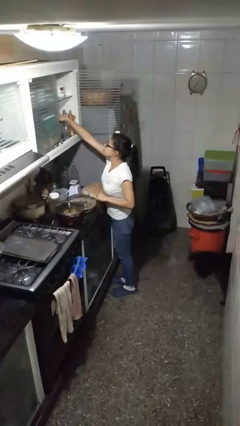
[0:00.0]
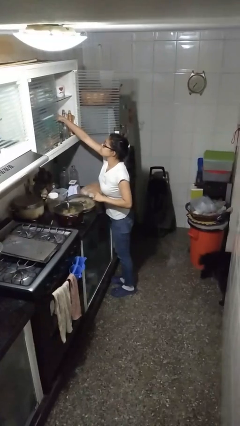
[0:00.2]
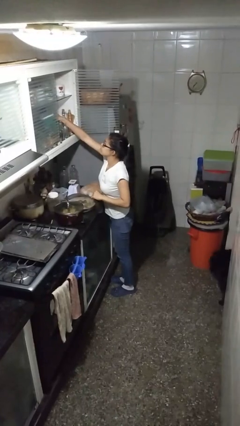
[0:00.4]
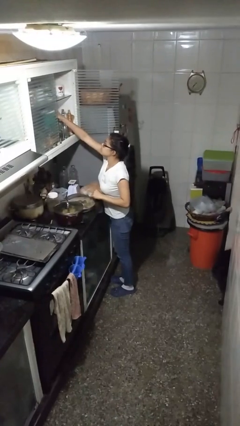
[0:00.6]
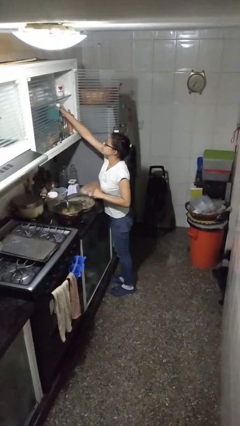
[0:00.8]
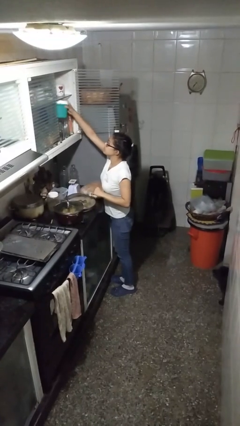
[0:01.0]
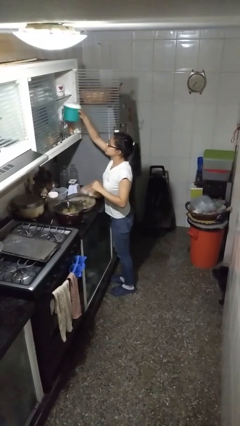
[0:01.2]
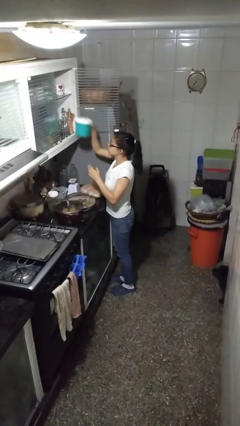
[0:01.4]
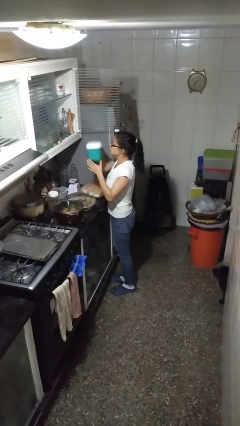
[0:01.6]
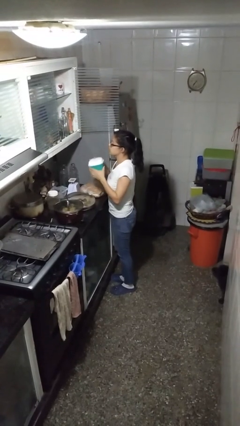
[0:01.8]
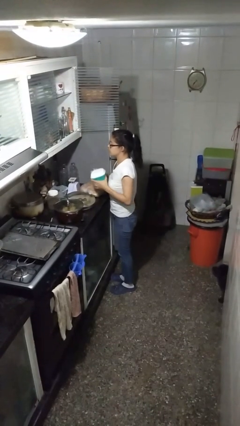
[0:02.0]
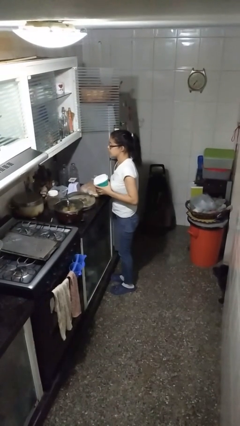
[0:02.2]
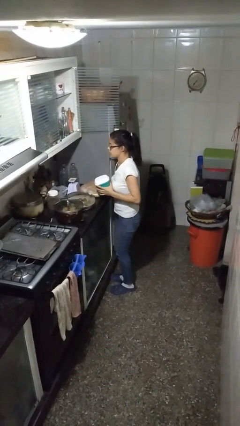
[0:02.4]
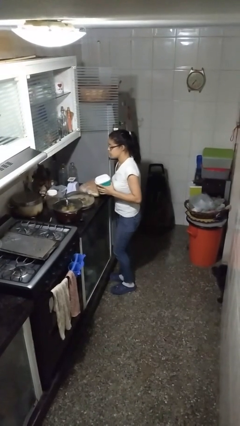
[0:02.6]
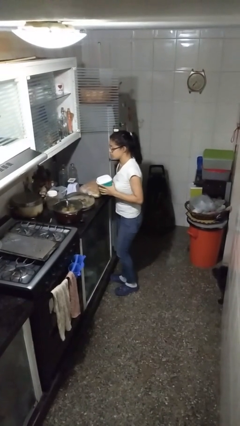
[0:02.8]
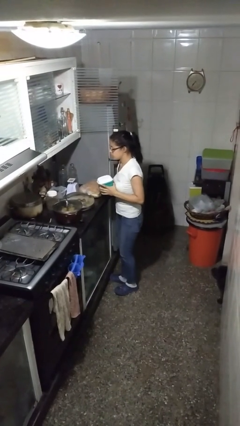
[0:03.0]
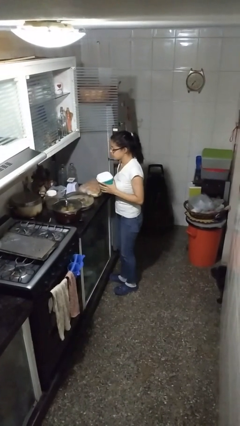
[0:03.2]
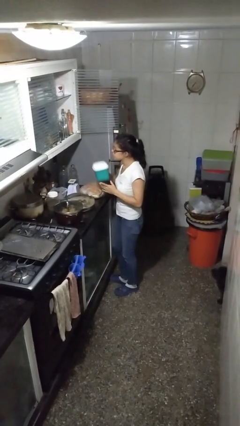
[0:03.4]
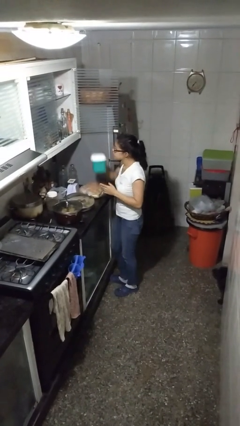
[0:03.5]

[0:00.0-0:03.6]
person picks up object from cabinet

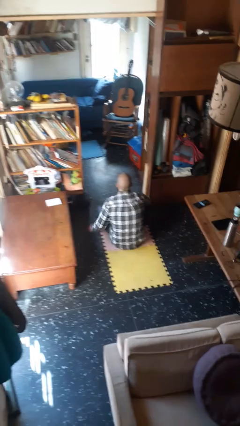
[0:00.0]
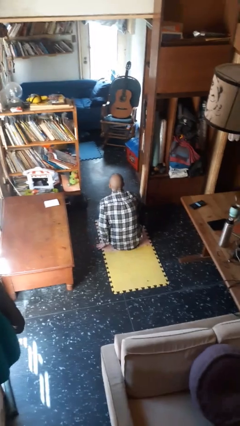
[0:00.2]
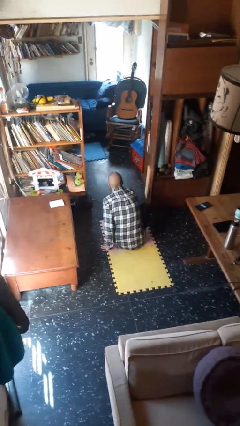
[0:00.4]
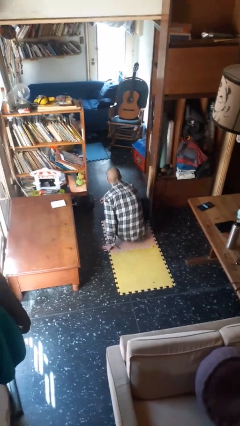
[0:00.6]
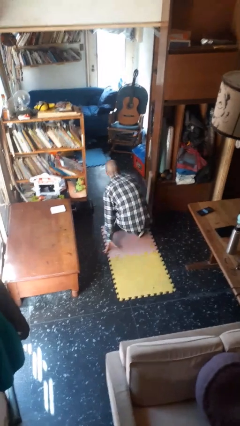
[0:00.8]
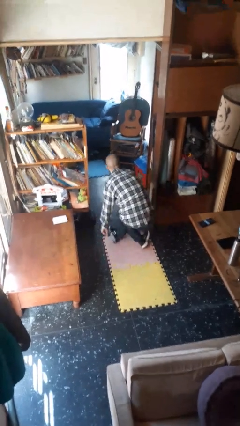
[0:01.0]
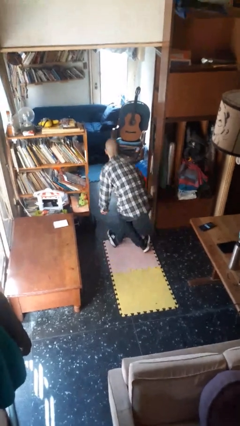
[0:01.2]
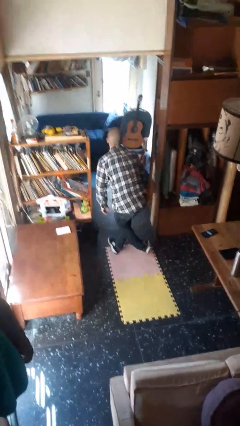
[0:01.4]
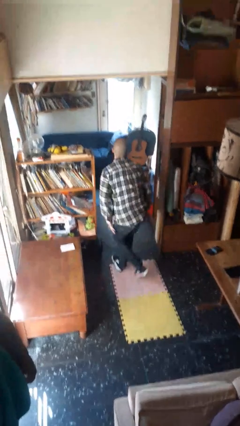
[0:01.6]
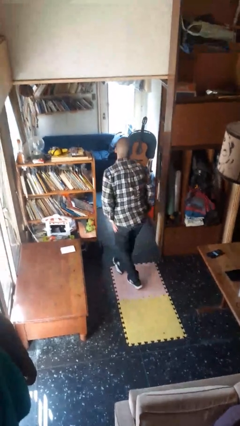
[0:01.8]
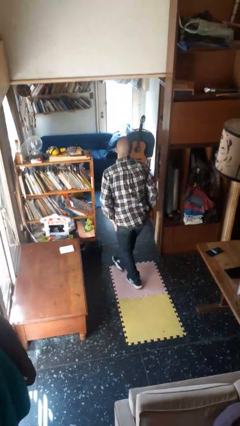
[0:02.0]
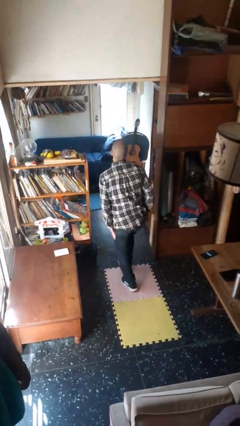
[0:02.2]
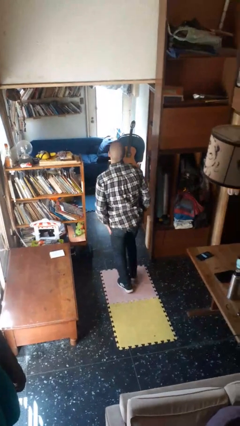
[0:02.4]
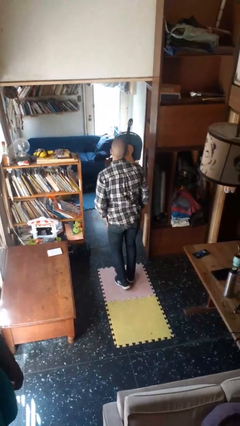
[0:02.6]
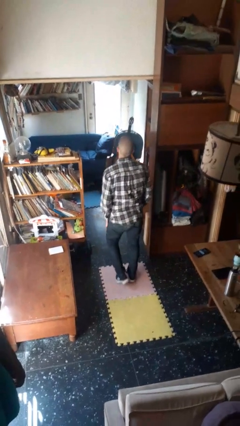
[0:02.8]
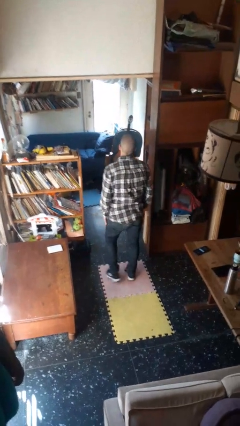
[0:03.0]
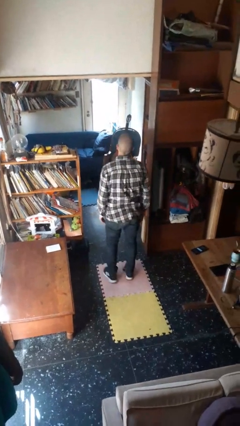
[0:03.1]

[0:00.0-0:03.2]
person stands up from floor

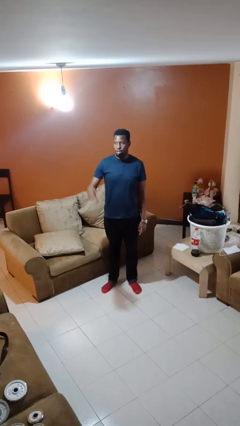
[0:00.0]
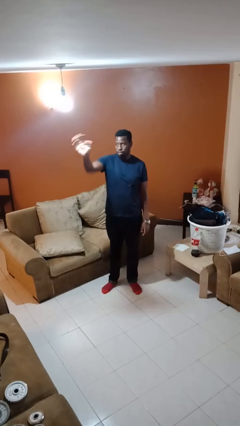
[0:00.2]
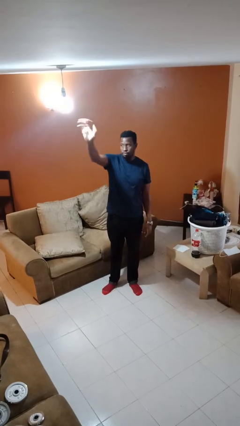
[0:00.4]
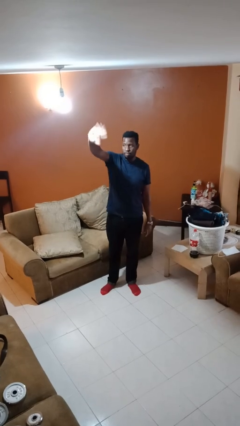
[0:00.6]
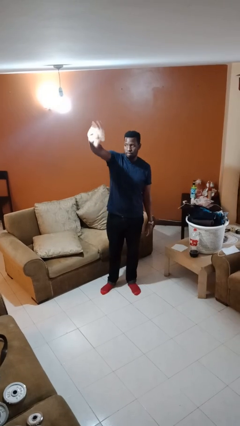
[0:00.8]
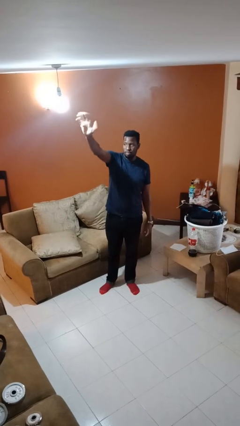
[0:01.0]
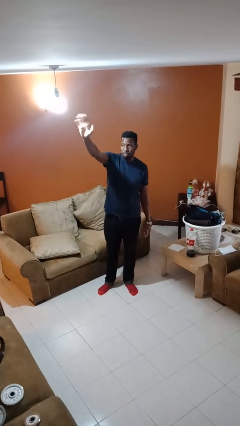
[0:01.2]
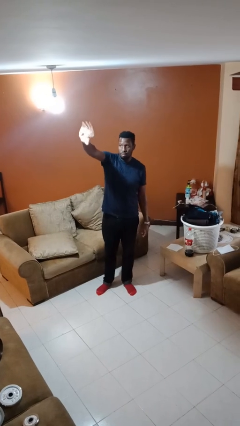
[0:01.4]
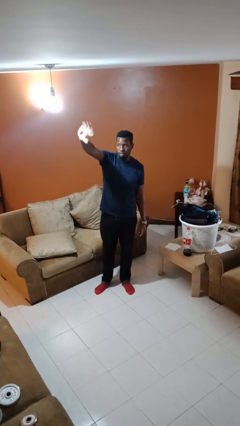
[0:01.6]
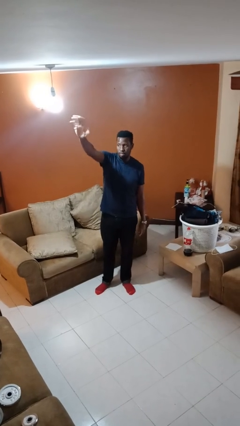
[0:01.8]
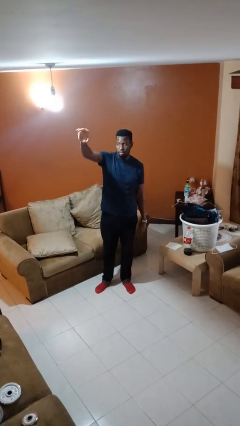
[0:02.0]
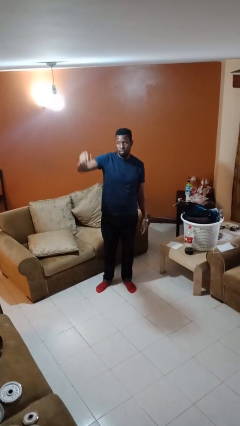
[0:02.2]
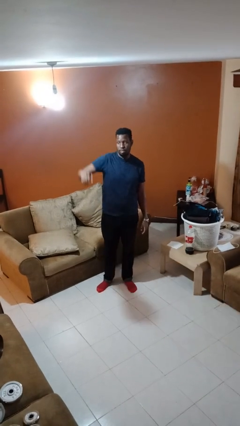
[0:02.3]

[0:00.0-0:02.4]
person waves at person

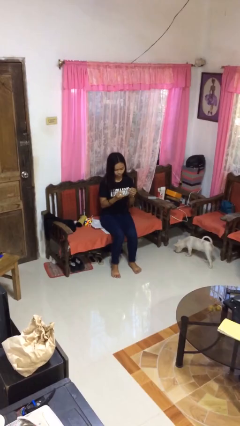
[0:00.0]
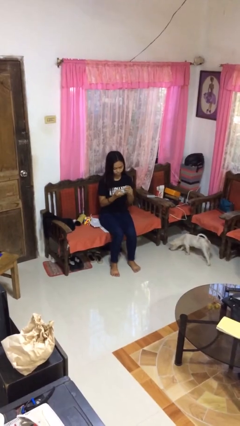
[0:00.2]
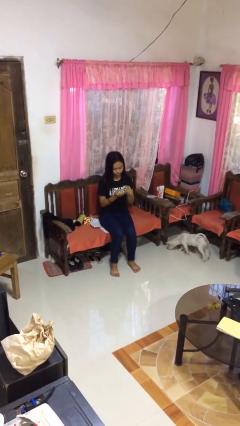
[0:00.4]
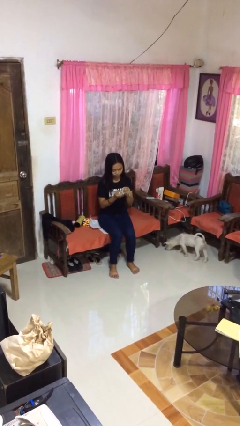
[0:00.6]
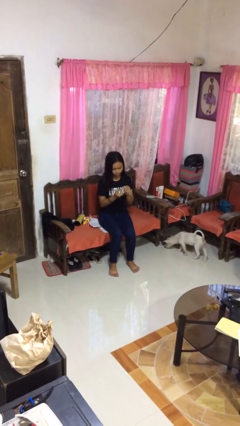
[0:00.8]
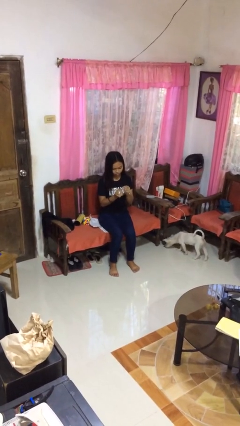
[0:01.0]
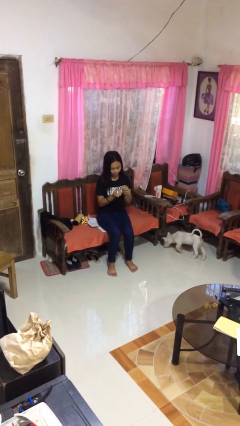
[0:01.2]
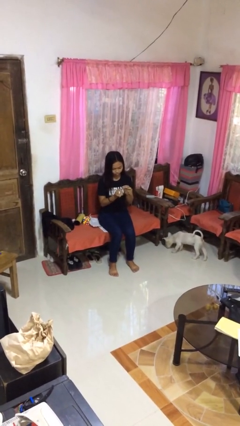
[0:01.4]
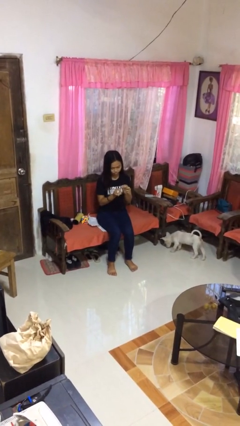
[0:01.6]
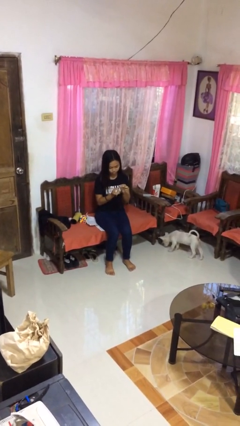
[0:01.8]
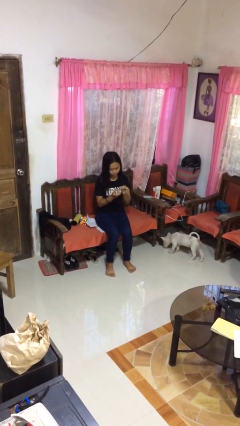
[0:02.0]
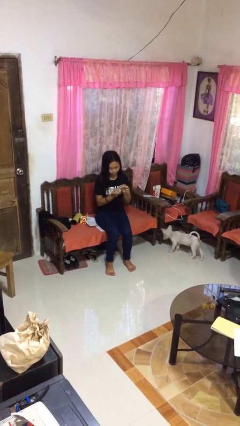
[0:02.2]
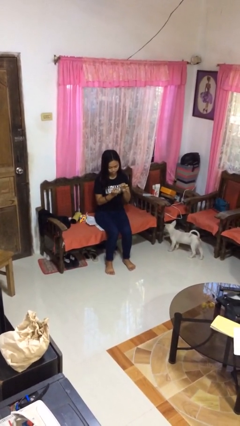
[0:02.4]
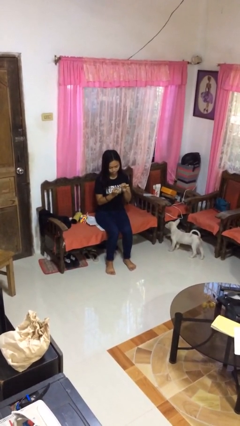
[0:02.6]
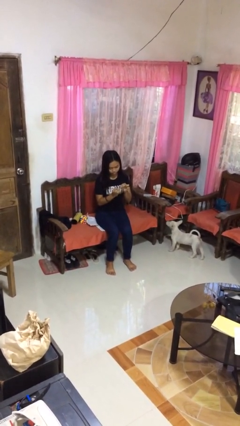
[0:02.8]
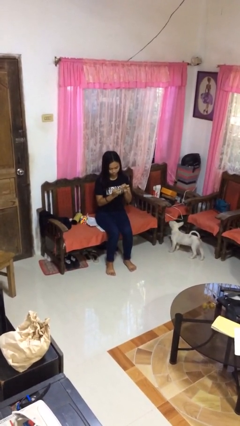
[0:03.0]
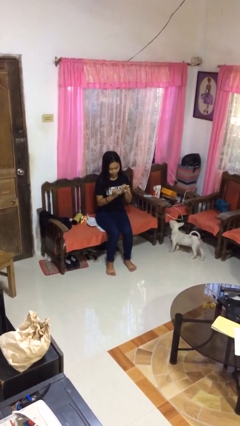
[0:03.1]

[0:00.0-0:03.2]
person clips fingernails

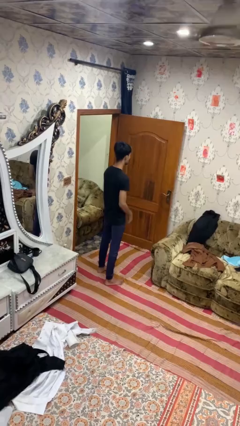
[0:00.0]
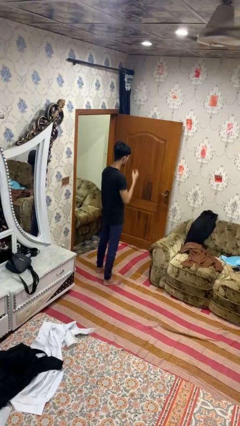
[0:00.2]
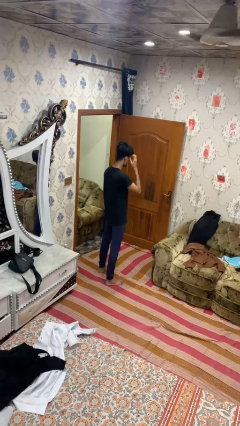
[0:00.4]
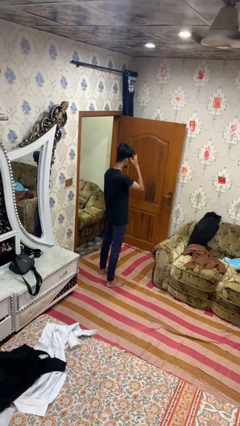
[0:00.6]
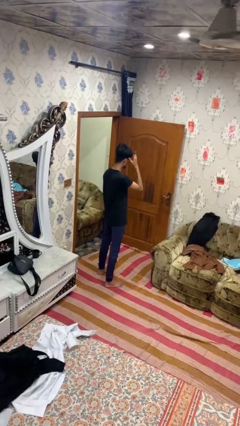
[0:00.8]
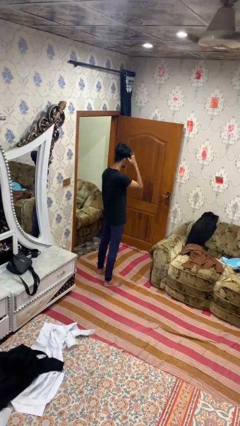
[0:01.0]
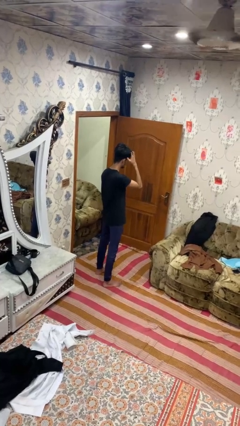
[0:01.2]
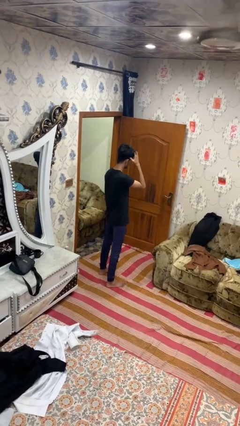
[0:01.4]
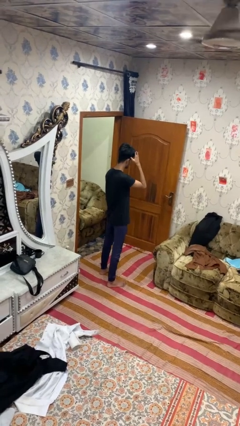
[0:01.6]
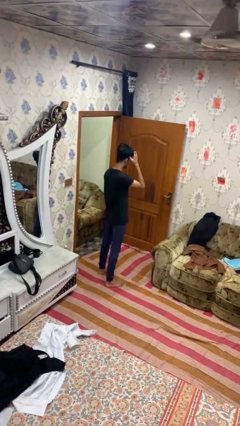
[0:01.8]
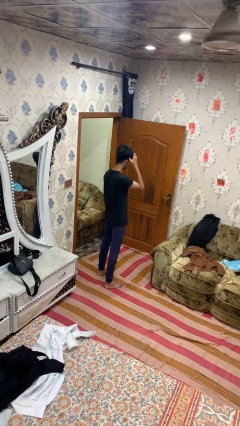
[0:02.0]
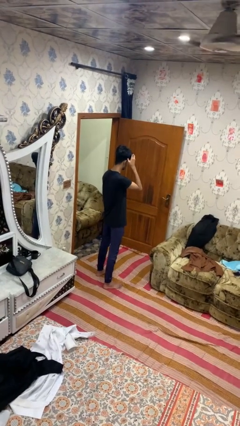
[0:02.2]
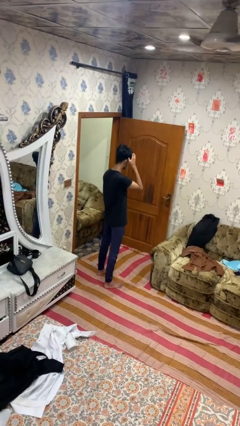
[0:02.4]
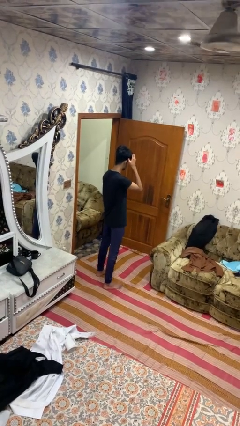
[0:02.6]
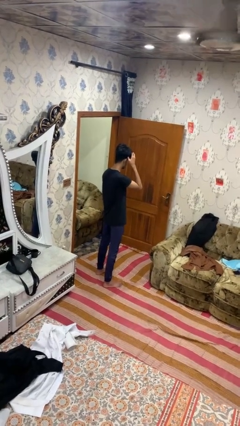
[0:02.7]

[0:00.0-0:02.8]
person strokes hair

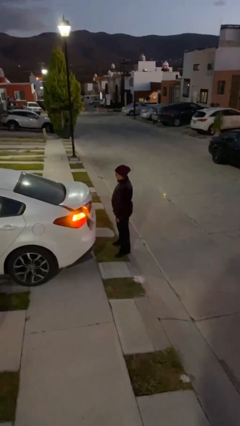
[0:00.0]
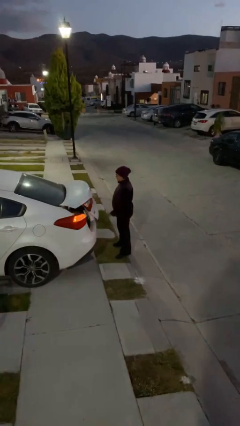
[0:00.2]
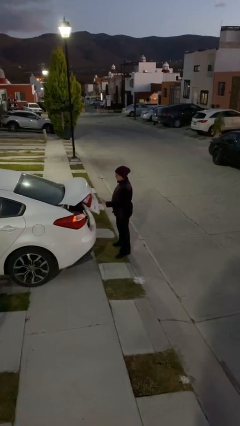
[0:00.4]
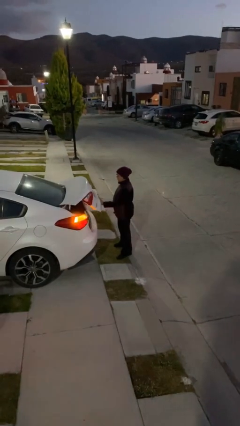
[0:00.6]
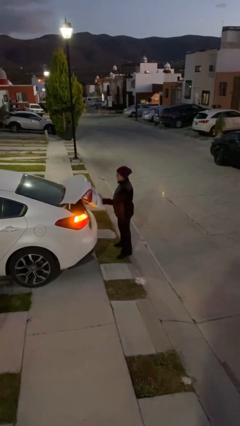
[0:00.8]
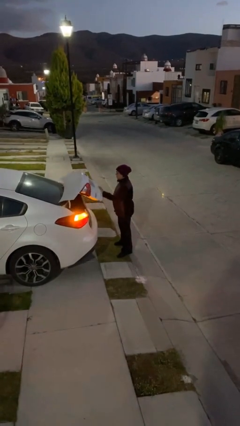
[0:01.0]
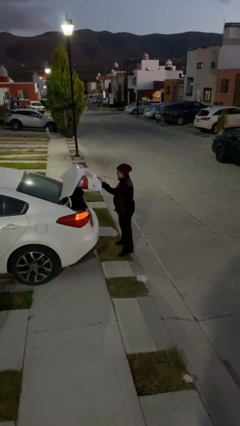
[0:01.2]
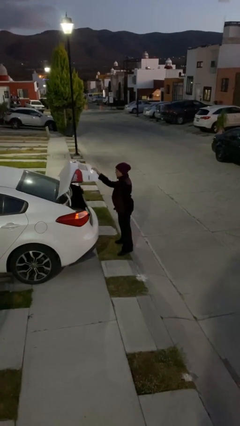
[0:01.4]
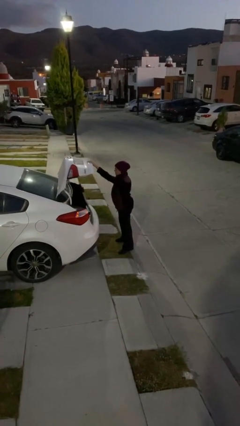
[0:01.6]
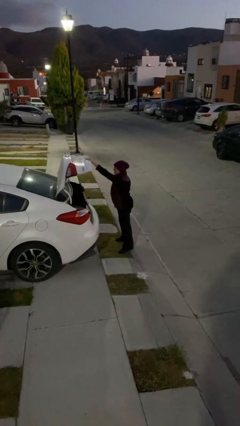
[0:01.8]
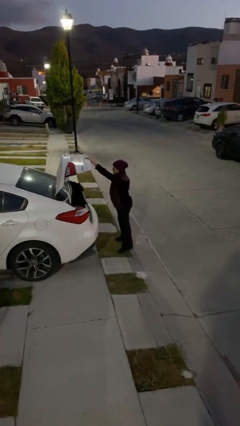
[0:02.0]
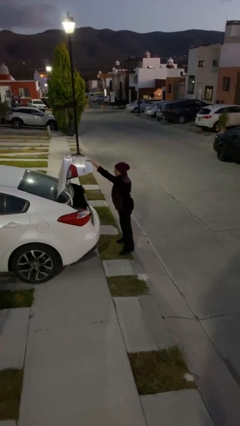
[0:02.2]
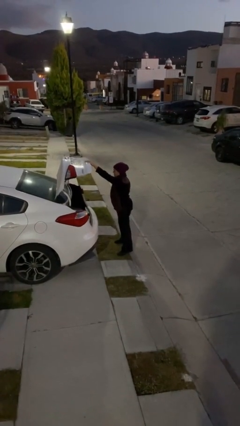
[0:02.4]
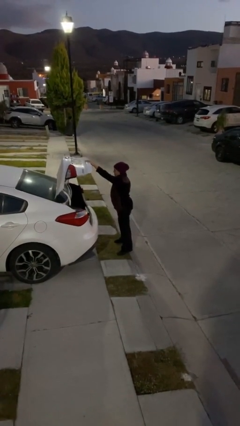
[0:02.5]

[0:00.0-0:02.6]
person opens car trunk
